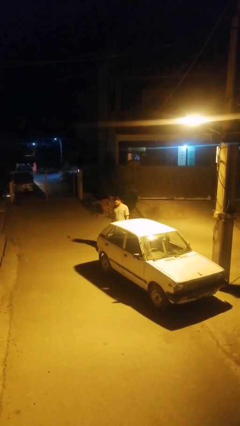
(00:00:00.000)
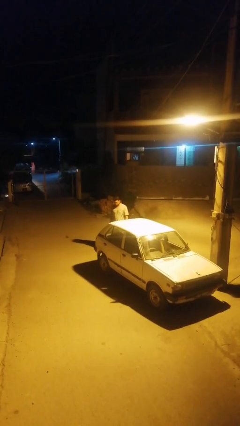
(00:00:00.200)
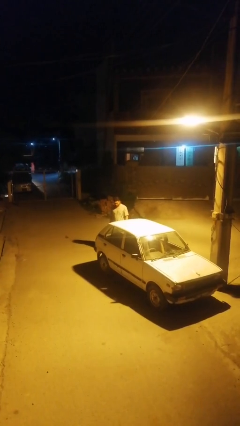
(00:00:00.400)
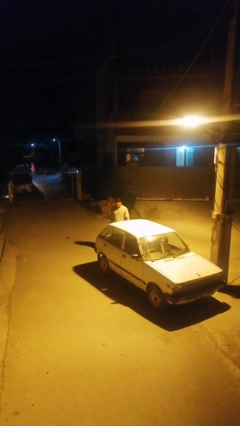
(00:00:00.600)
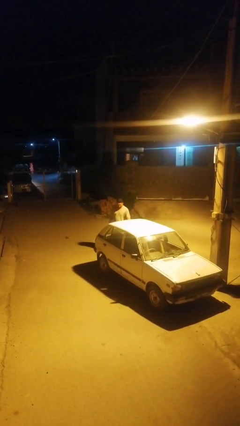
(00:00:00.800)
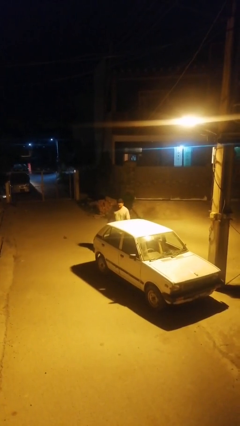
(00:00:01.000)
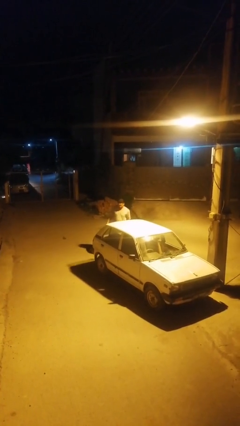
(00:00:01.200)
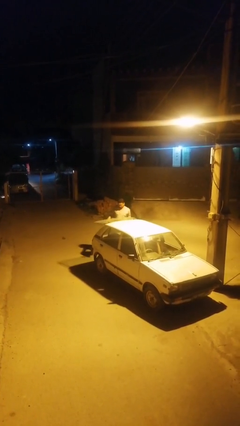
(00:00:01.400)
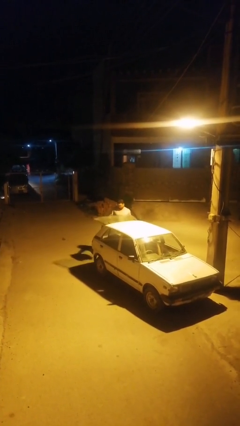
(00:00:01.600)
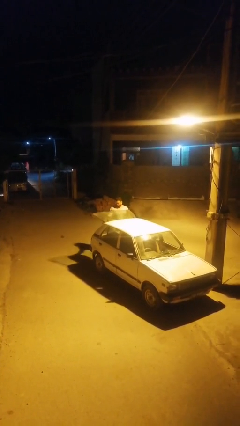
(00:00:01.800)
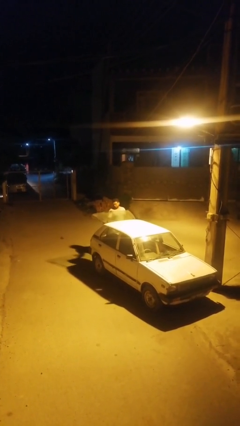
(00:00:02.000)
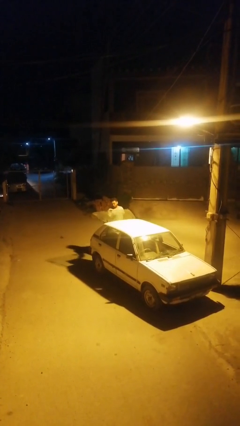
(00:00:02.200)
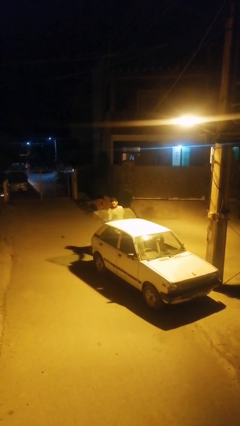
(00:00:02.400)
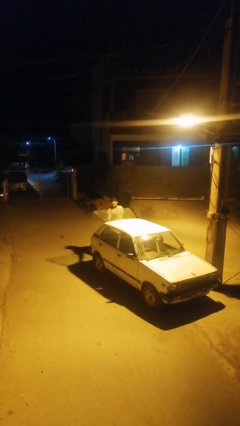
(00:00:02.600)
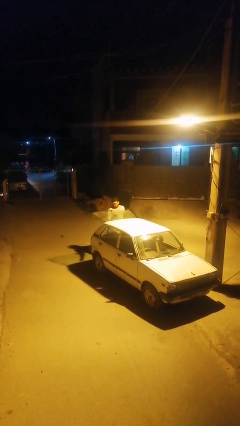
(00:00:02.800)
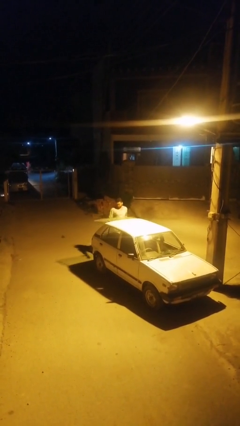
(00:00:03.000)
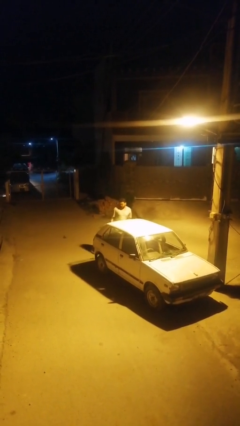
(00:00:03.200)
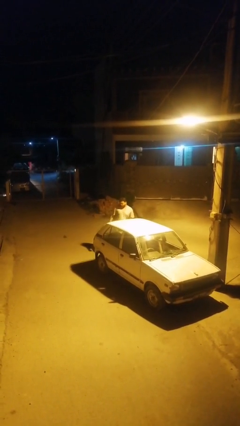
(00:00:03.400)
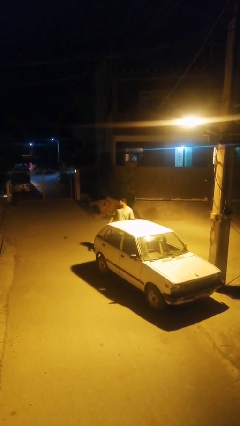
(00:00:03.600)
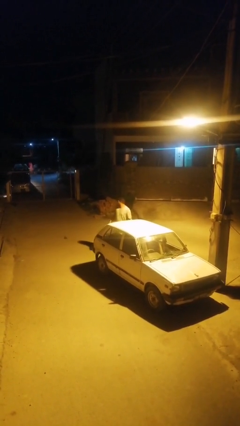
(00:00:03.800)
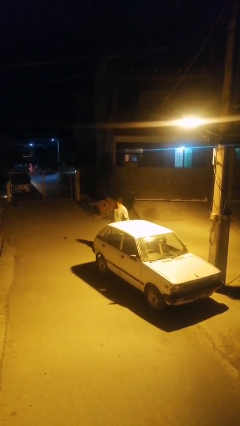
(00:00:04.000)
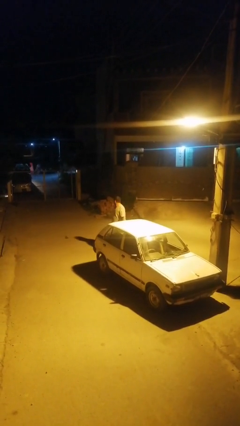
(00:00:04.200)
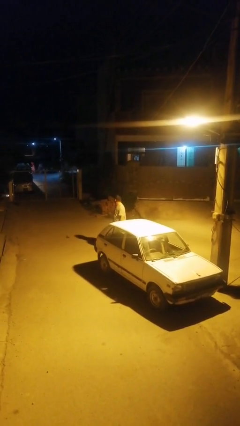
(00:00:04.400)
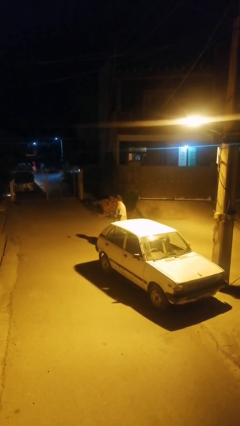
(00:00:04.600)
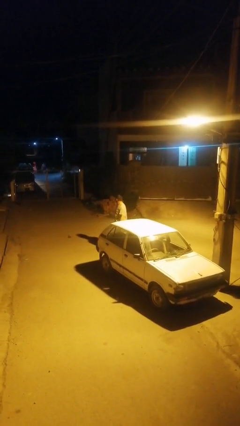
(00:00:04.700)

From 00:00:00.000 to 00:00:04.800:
person loads car

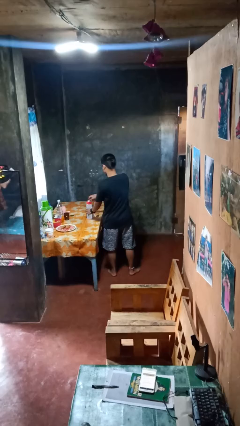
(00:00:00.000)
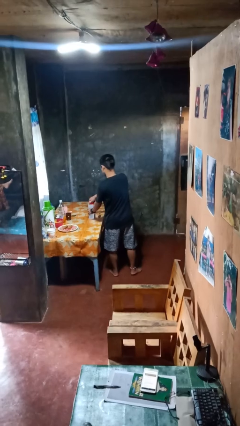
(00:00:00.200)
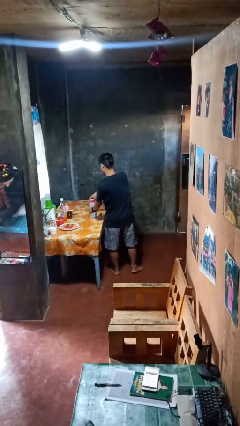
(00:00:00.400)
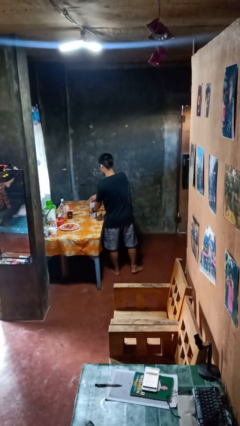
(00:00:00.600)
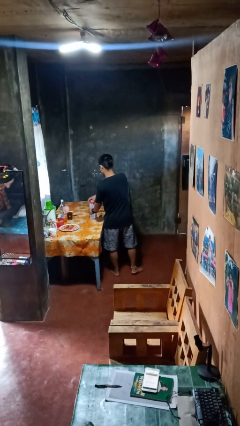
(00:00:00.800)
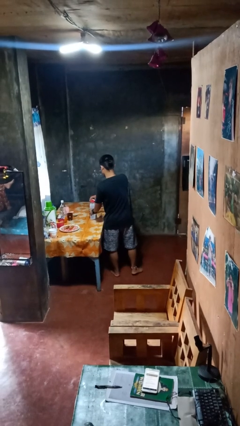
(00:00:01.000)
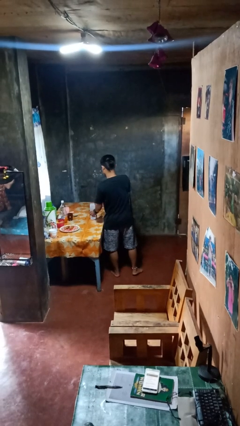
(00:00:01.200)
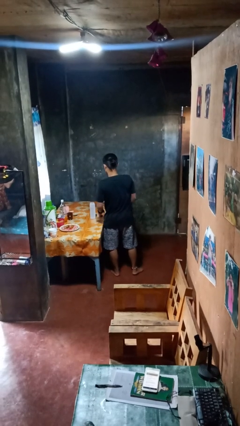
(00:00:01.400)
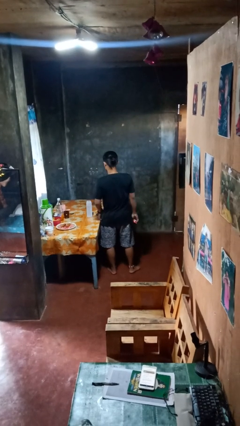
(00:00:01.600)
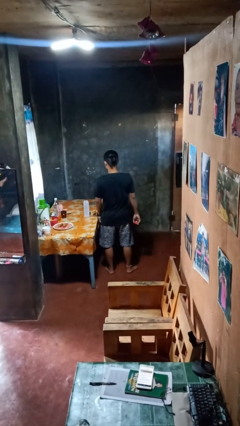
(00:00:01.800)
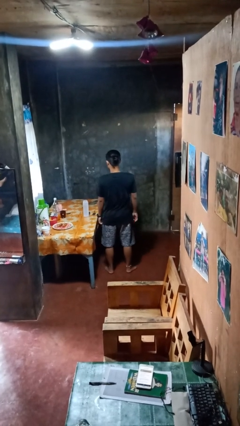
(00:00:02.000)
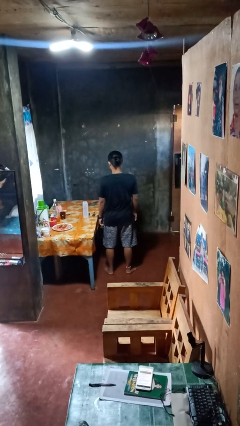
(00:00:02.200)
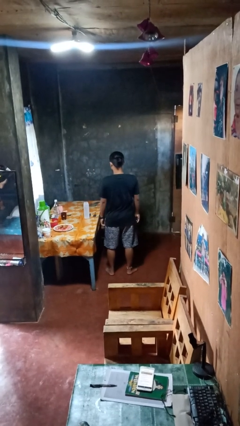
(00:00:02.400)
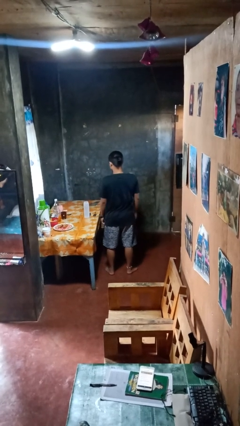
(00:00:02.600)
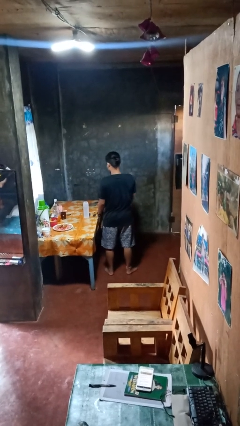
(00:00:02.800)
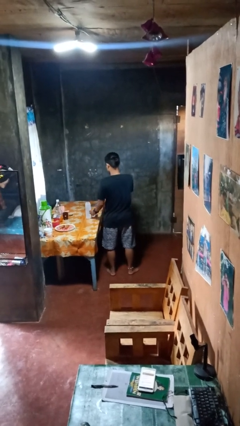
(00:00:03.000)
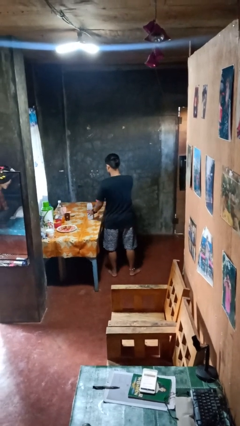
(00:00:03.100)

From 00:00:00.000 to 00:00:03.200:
person opens jar

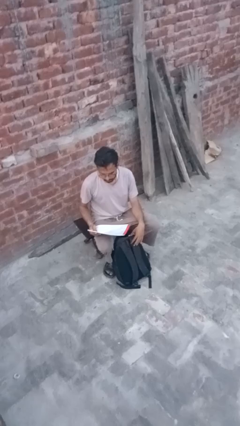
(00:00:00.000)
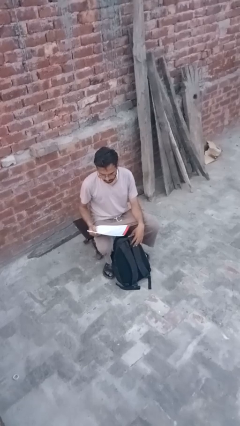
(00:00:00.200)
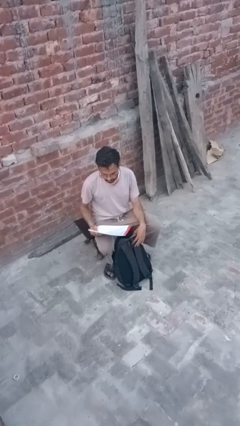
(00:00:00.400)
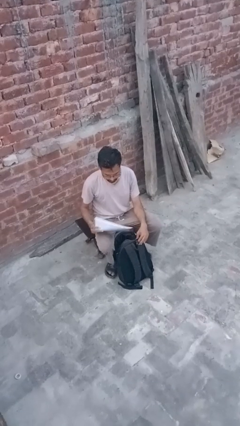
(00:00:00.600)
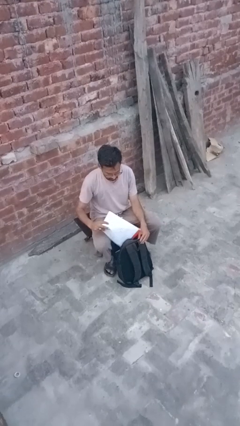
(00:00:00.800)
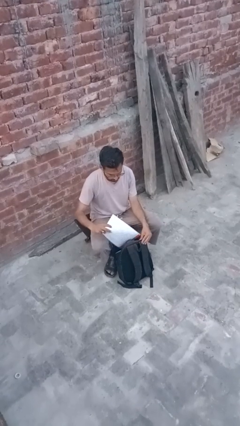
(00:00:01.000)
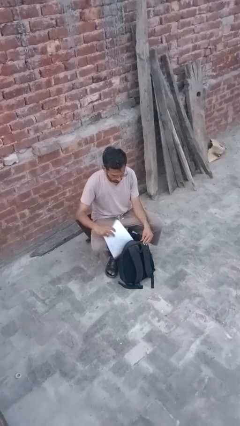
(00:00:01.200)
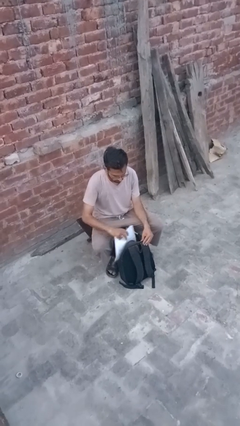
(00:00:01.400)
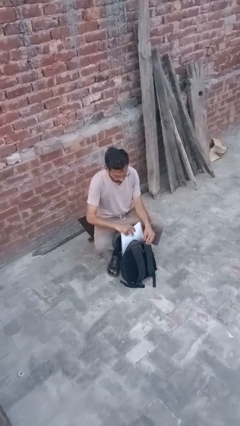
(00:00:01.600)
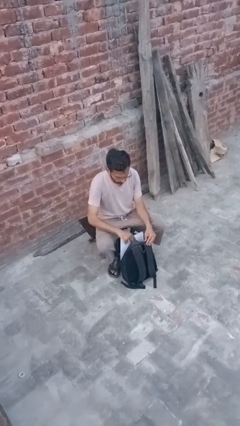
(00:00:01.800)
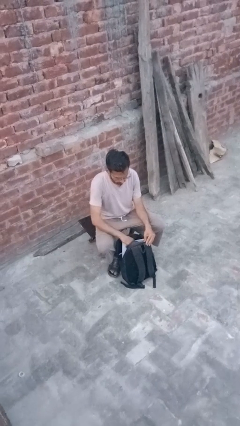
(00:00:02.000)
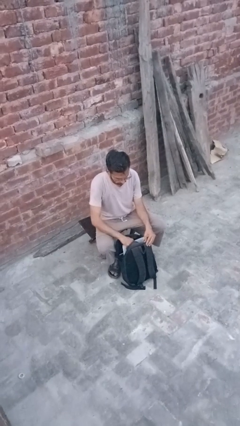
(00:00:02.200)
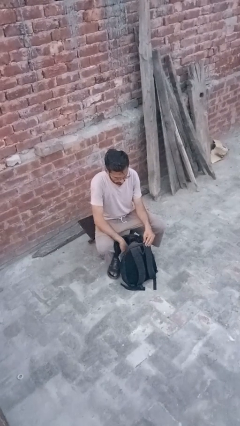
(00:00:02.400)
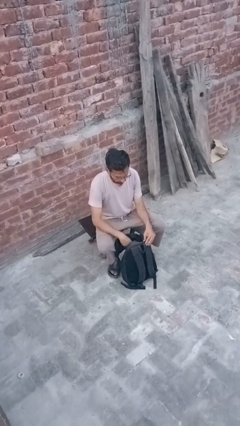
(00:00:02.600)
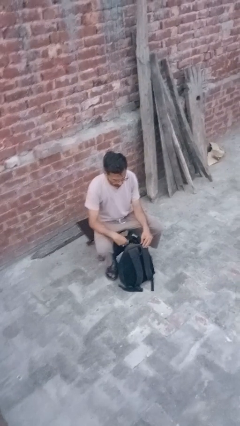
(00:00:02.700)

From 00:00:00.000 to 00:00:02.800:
person puts object into backpack

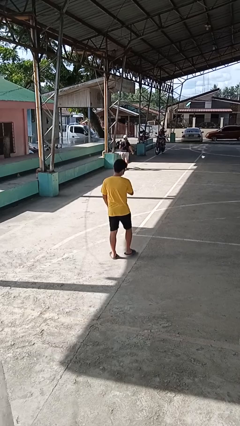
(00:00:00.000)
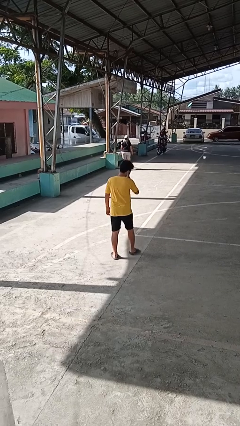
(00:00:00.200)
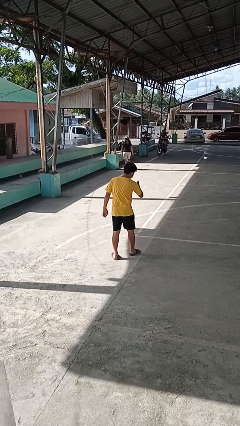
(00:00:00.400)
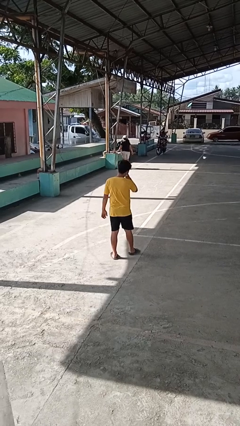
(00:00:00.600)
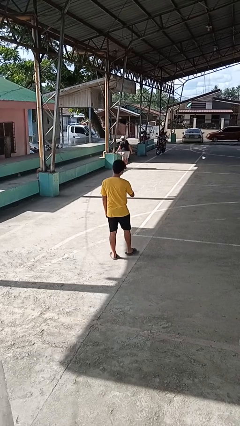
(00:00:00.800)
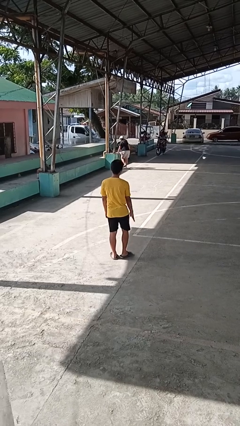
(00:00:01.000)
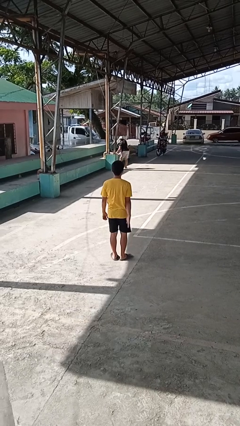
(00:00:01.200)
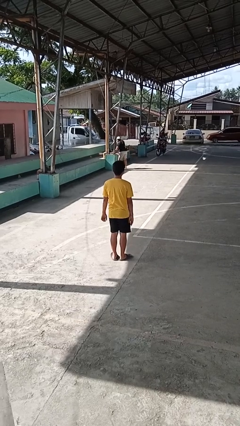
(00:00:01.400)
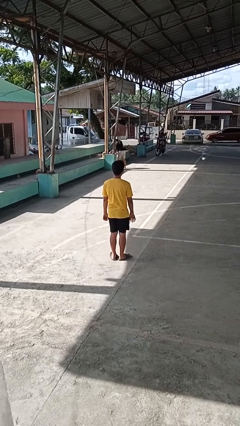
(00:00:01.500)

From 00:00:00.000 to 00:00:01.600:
person karate chop

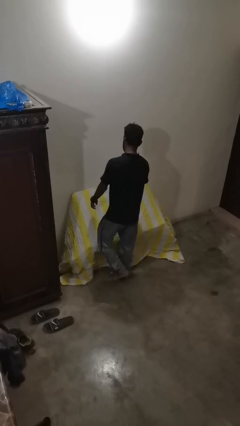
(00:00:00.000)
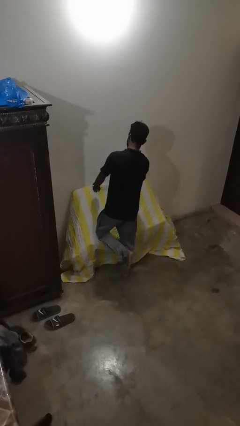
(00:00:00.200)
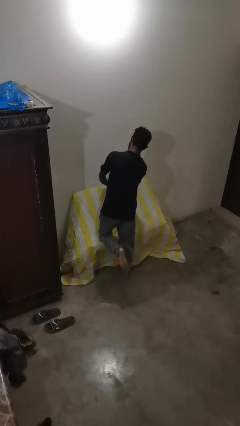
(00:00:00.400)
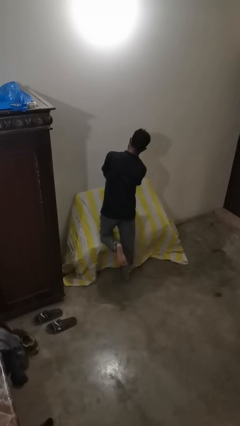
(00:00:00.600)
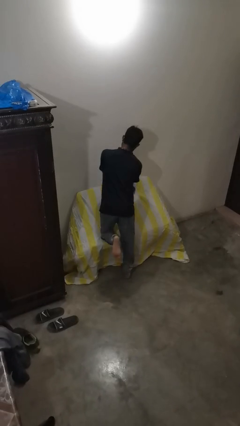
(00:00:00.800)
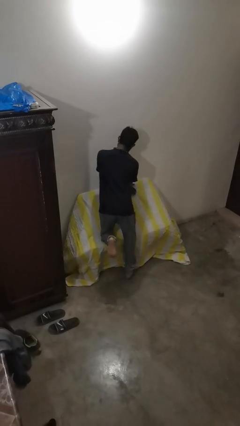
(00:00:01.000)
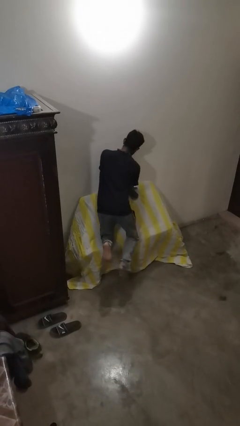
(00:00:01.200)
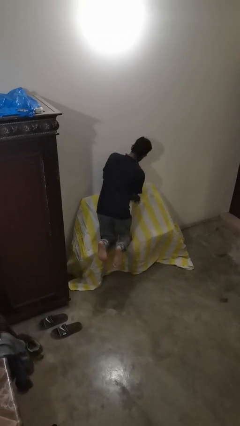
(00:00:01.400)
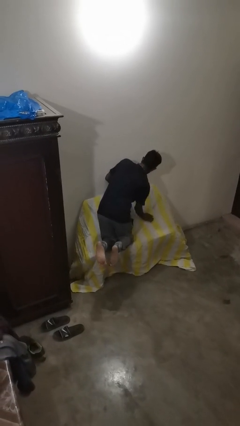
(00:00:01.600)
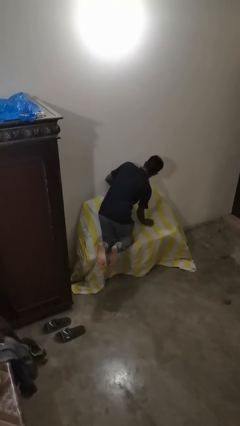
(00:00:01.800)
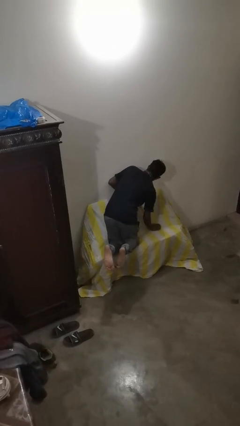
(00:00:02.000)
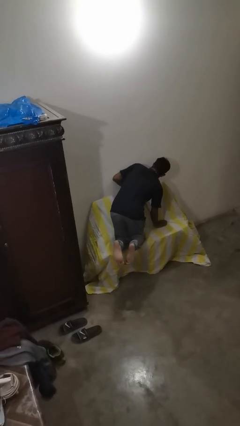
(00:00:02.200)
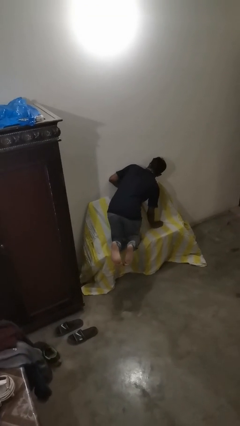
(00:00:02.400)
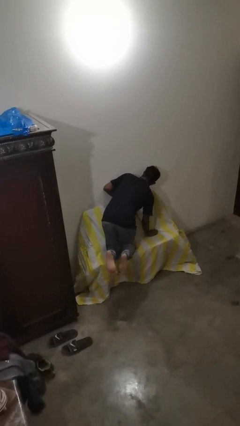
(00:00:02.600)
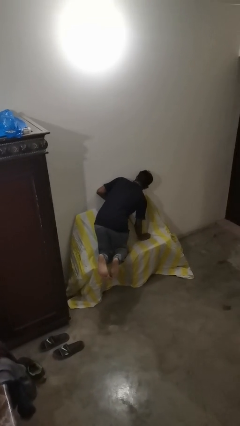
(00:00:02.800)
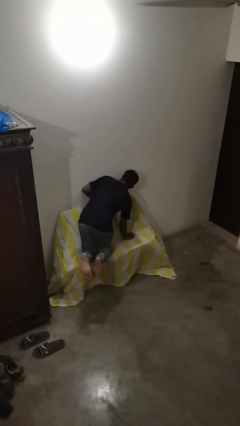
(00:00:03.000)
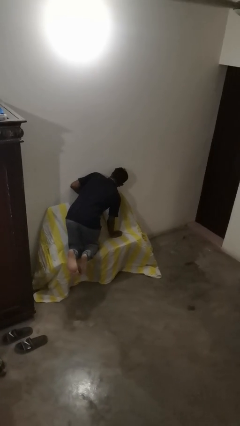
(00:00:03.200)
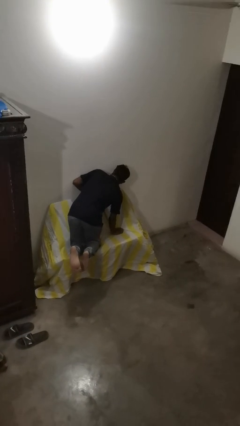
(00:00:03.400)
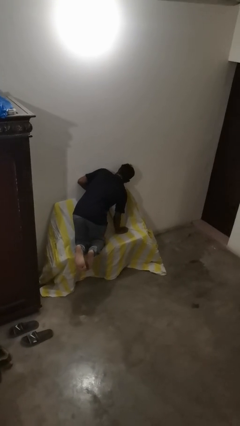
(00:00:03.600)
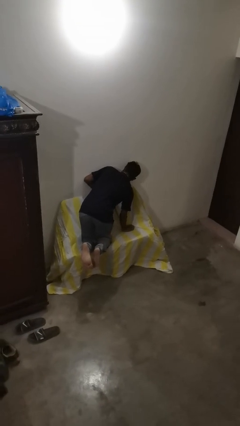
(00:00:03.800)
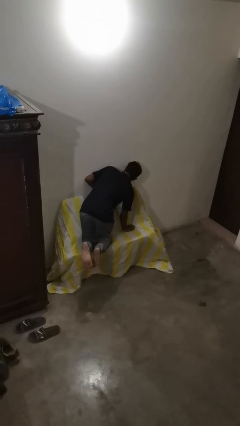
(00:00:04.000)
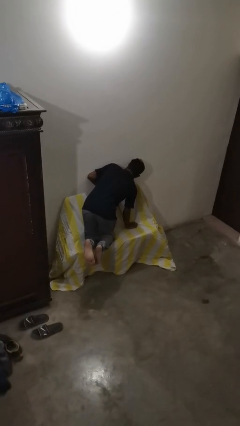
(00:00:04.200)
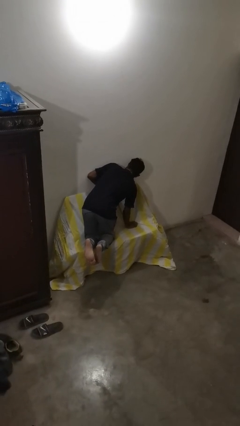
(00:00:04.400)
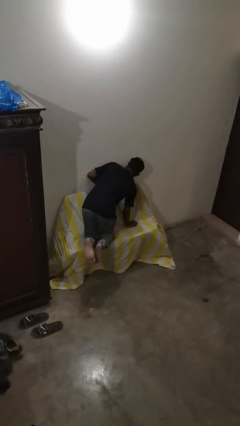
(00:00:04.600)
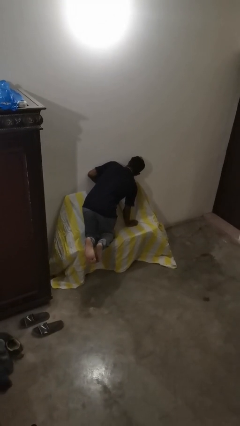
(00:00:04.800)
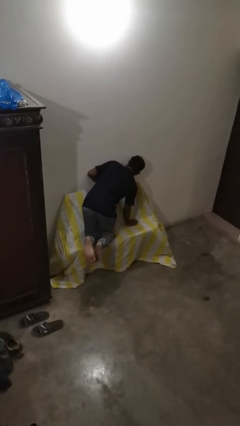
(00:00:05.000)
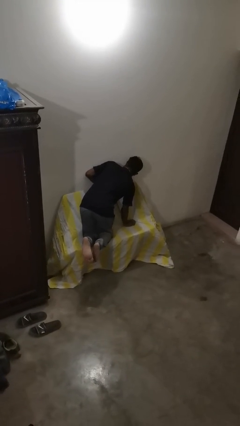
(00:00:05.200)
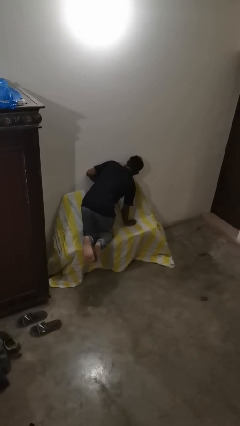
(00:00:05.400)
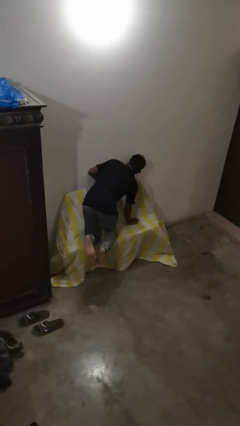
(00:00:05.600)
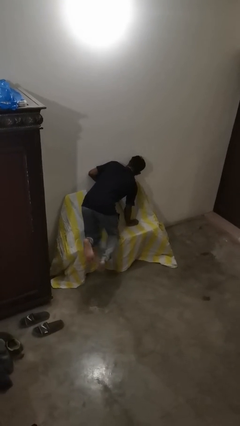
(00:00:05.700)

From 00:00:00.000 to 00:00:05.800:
person lies down on couch
